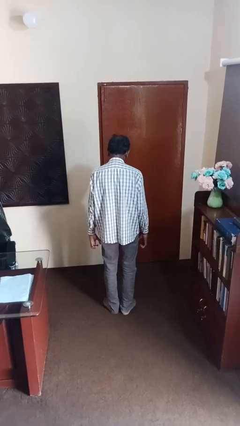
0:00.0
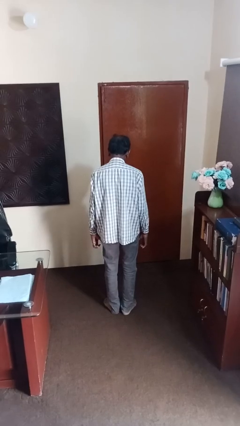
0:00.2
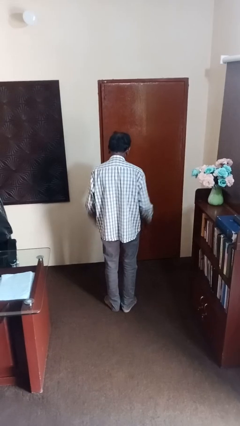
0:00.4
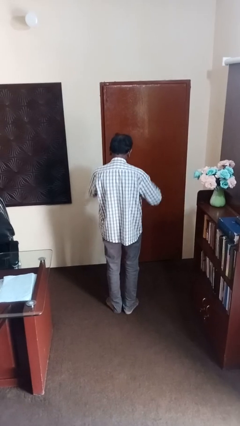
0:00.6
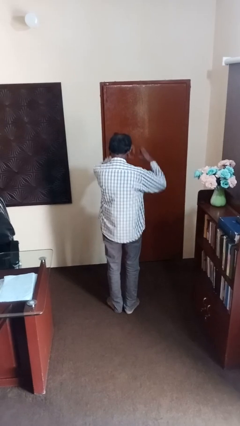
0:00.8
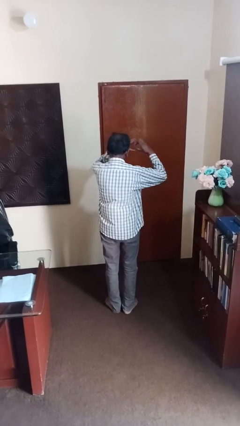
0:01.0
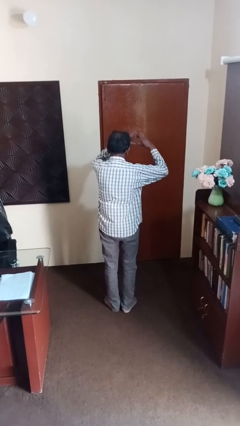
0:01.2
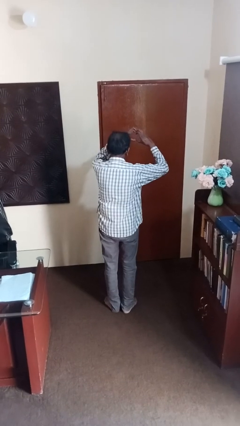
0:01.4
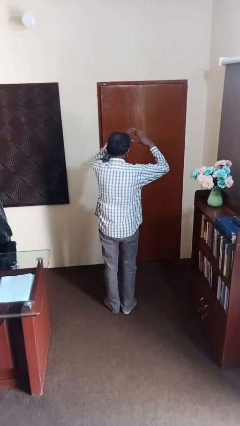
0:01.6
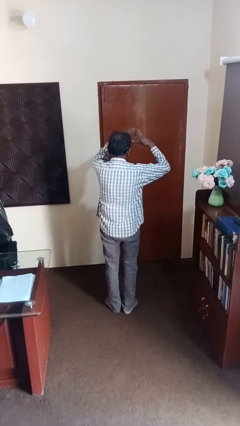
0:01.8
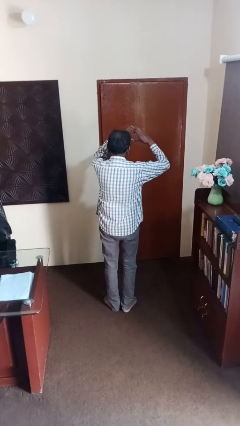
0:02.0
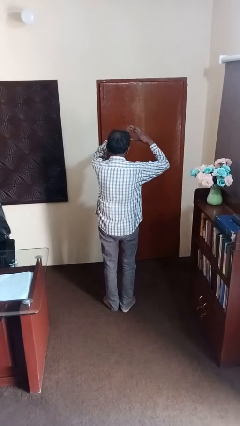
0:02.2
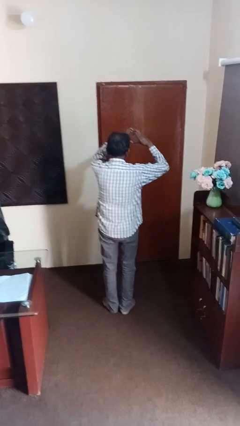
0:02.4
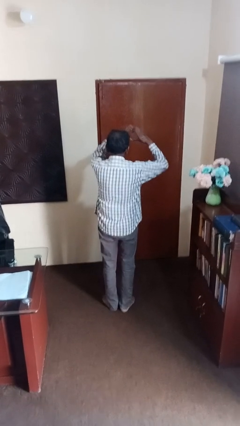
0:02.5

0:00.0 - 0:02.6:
person gestures heart

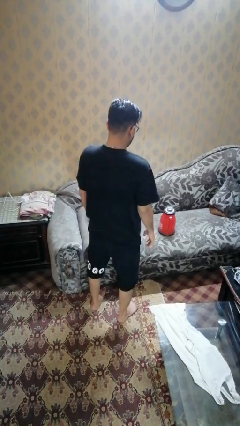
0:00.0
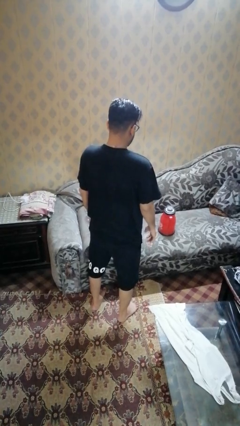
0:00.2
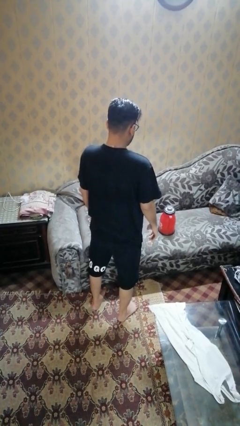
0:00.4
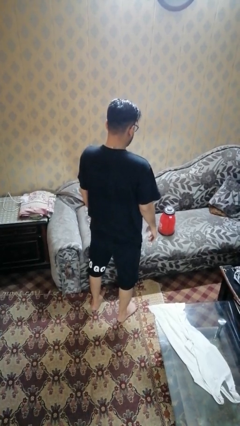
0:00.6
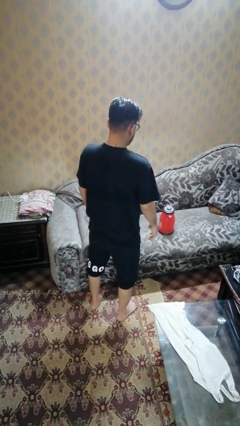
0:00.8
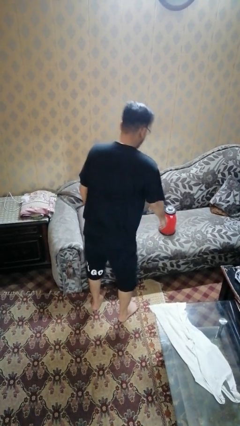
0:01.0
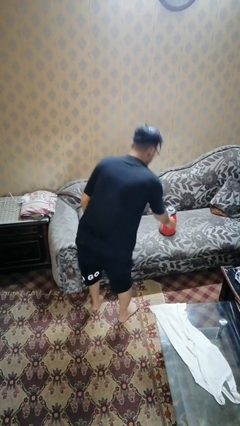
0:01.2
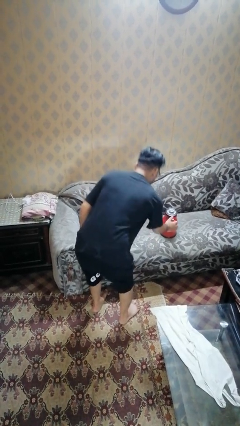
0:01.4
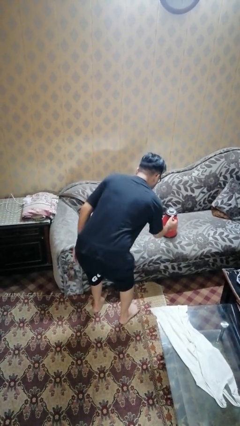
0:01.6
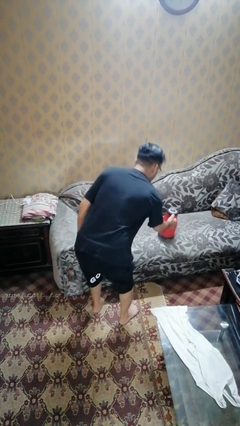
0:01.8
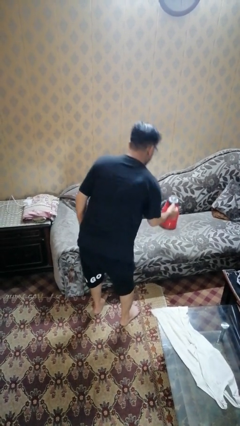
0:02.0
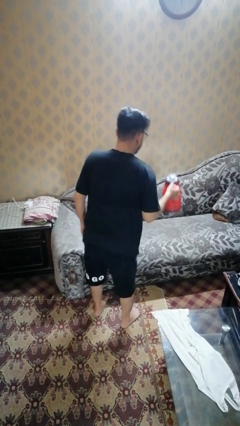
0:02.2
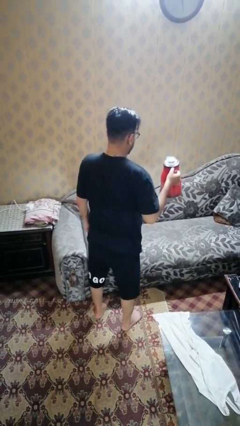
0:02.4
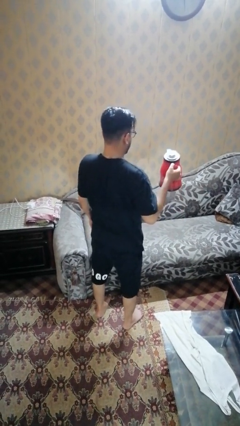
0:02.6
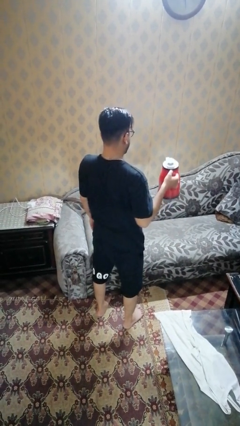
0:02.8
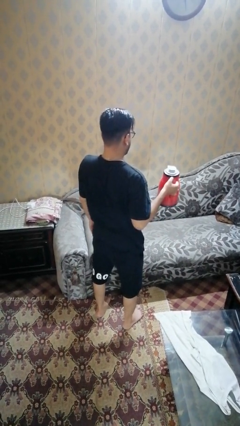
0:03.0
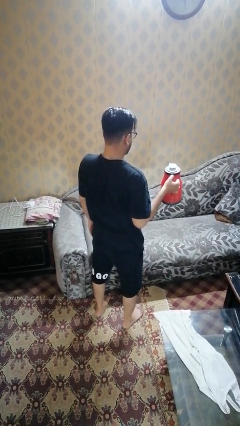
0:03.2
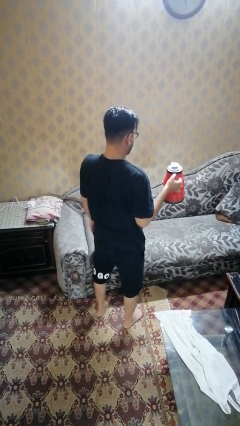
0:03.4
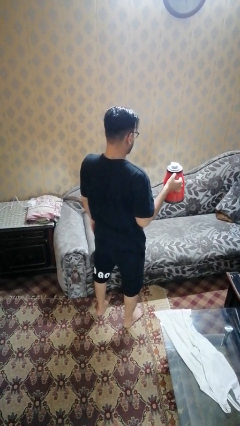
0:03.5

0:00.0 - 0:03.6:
person picks up object from couch

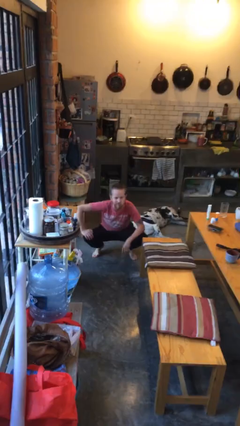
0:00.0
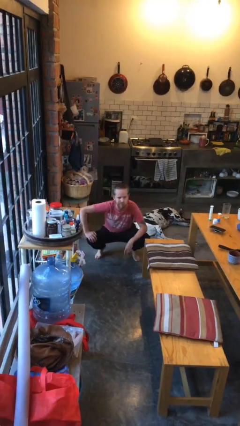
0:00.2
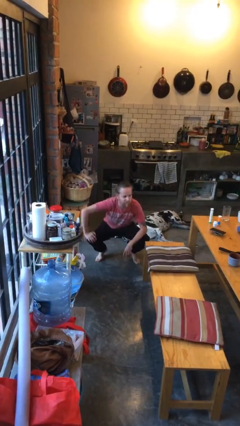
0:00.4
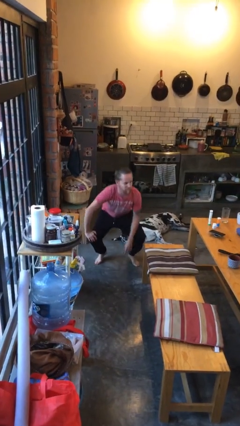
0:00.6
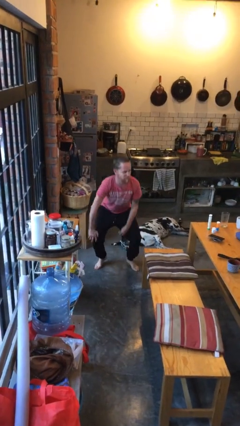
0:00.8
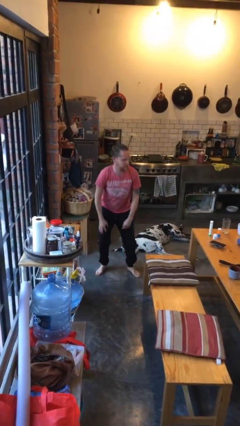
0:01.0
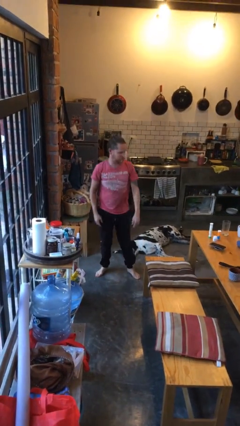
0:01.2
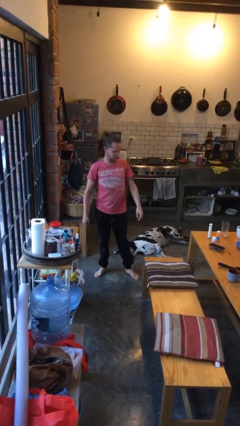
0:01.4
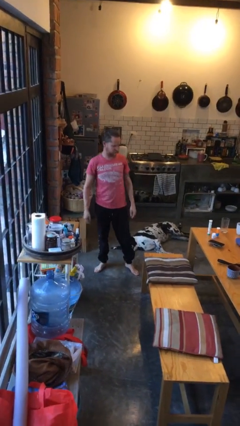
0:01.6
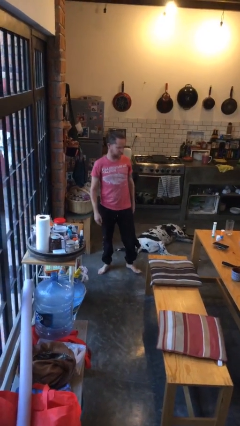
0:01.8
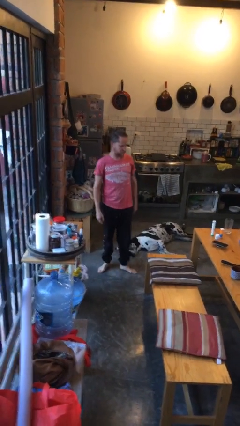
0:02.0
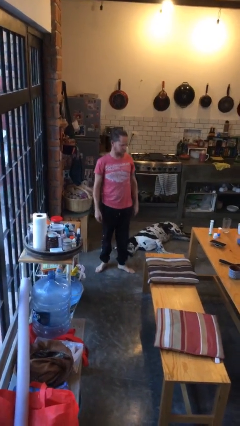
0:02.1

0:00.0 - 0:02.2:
person stands up

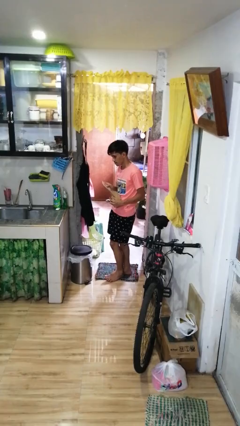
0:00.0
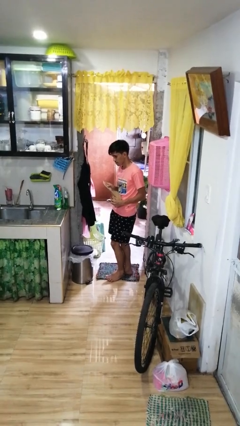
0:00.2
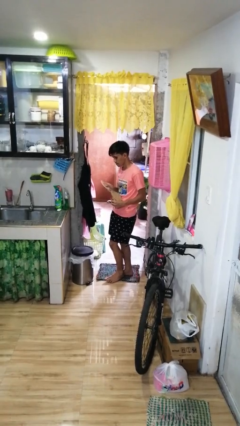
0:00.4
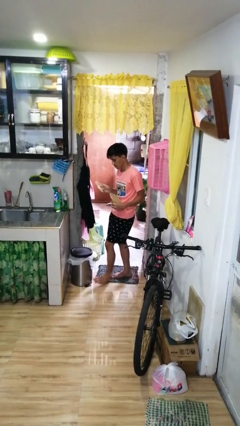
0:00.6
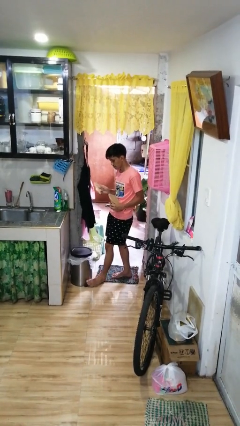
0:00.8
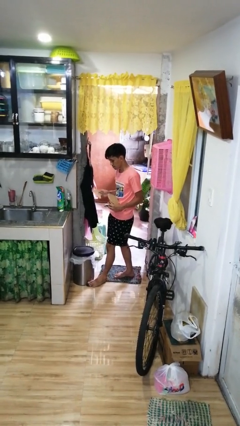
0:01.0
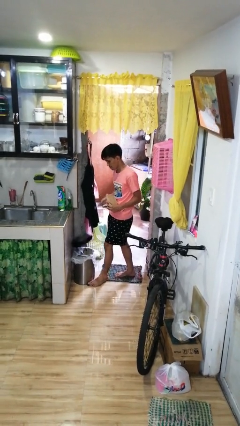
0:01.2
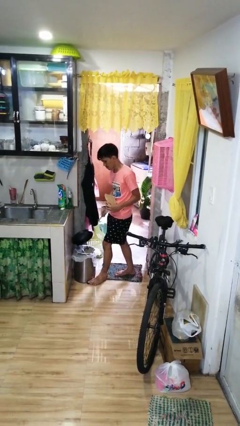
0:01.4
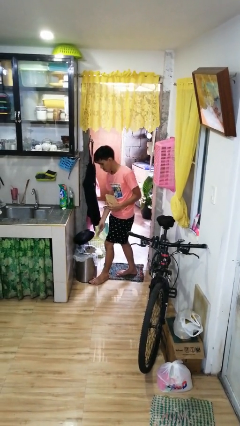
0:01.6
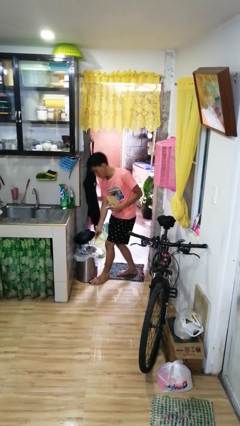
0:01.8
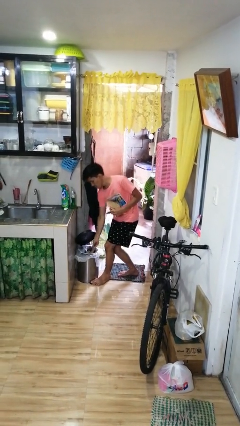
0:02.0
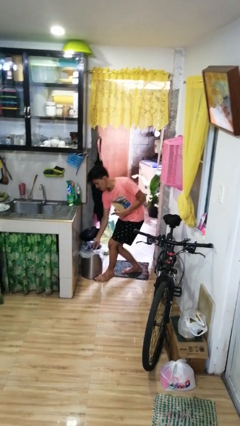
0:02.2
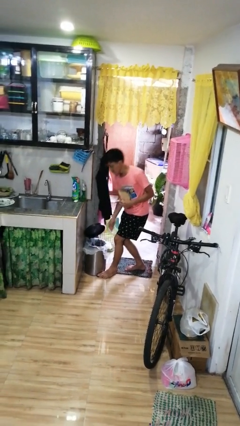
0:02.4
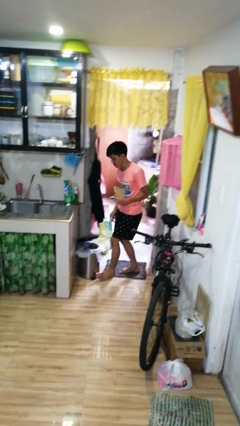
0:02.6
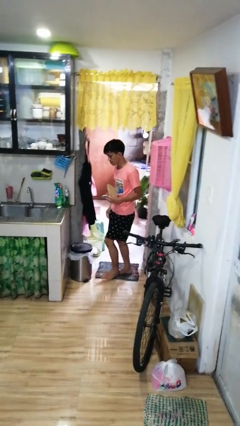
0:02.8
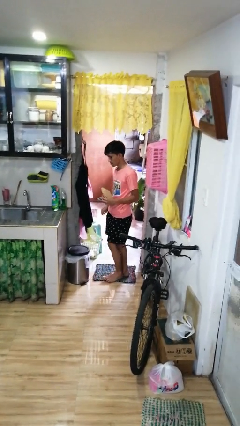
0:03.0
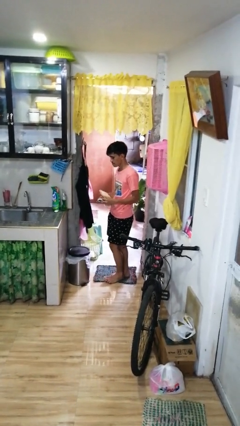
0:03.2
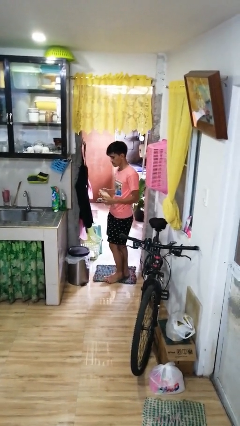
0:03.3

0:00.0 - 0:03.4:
person discards trash

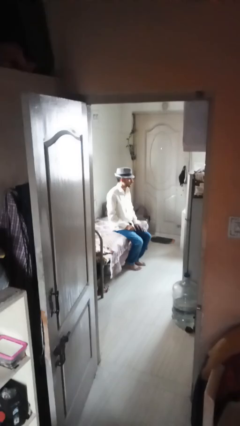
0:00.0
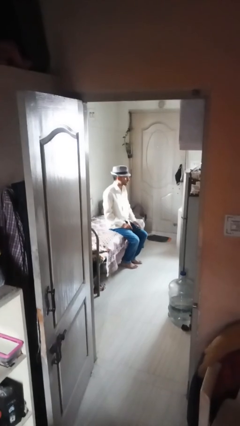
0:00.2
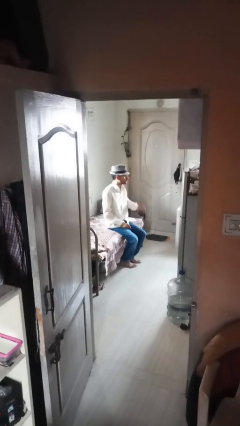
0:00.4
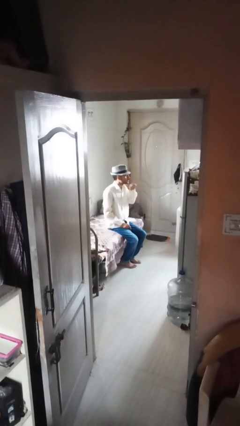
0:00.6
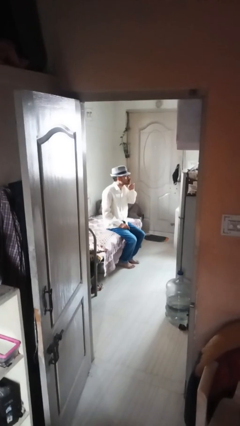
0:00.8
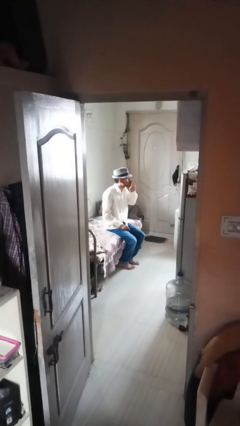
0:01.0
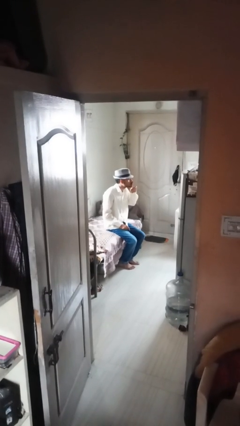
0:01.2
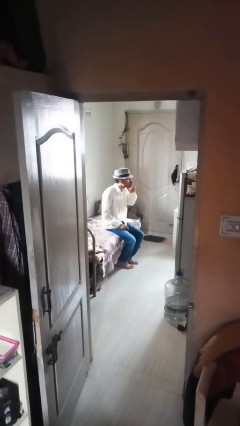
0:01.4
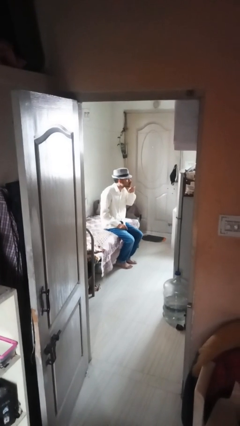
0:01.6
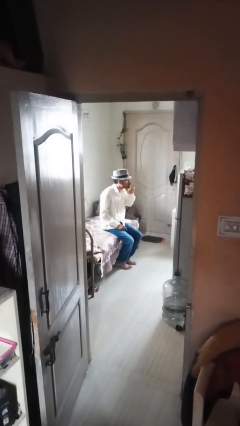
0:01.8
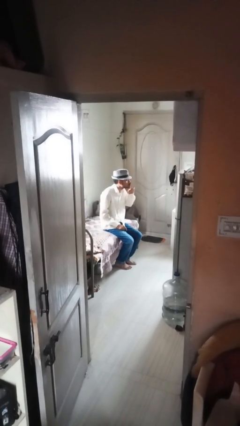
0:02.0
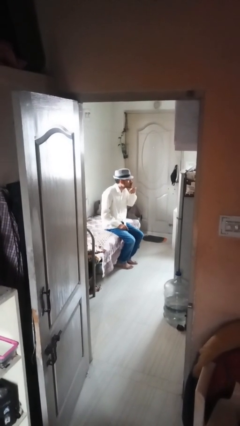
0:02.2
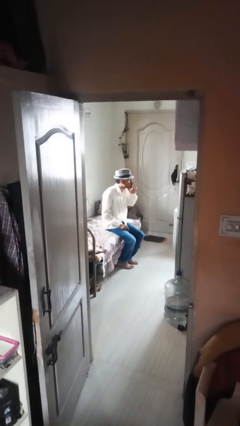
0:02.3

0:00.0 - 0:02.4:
person gestures be quiet

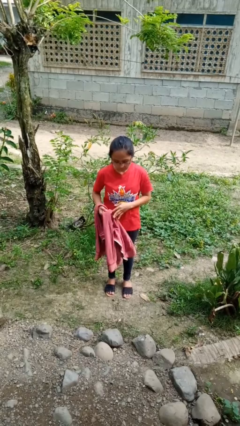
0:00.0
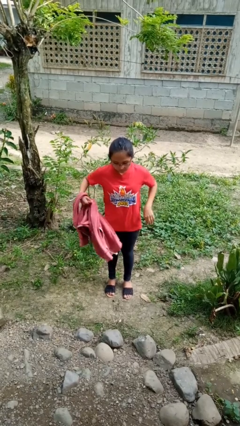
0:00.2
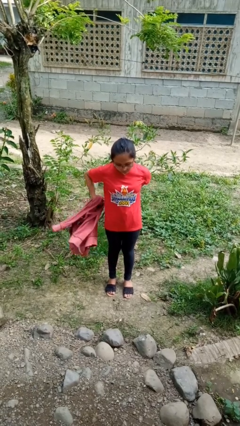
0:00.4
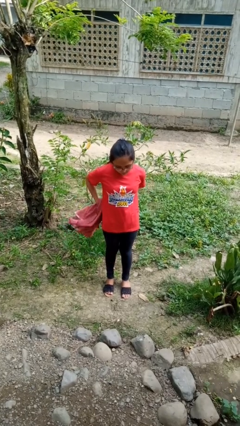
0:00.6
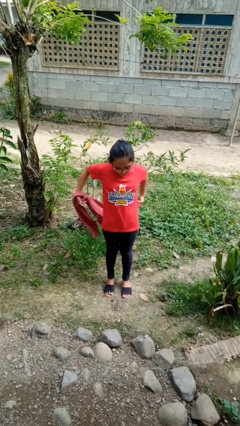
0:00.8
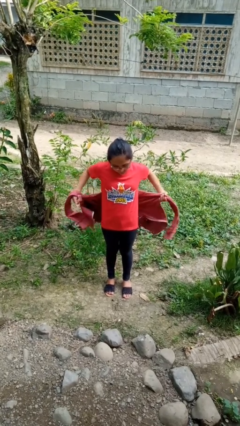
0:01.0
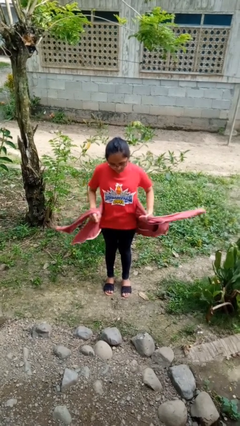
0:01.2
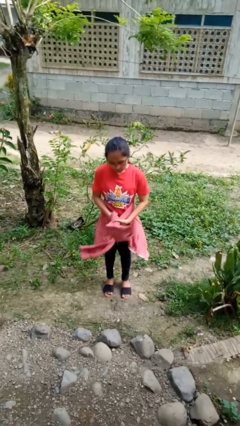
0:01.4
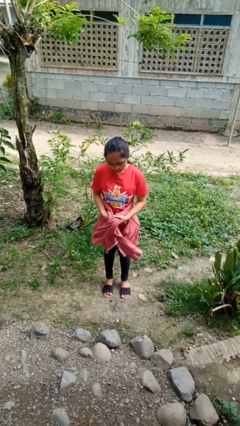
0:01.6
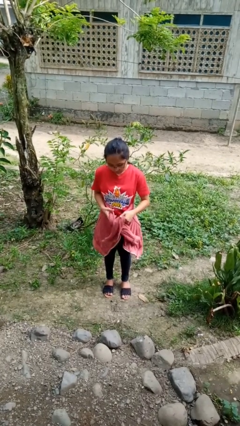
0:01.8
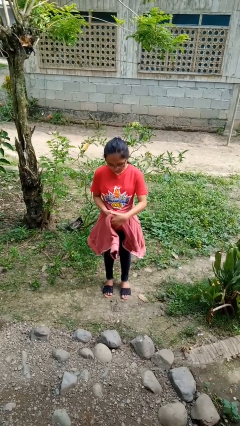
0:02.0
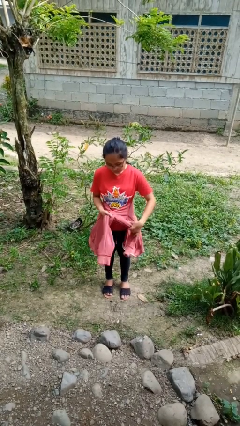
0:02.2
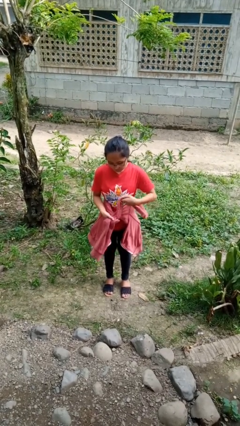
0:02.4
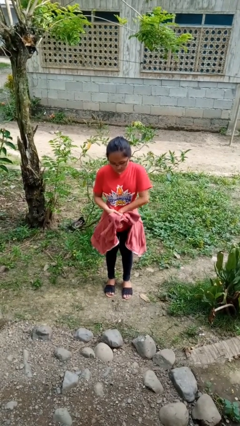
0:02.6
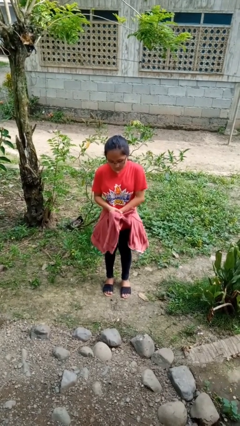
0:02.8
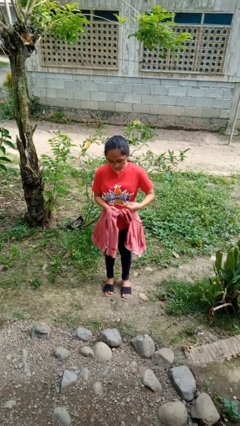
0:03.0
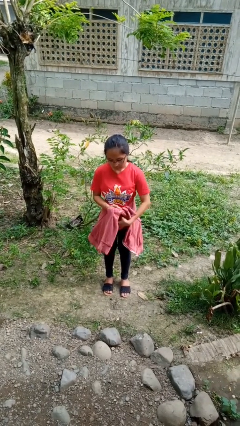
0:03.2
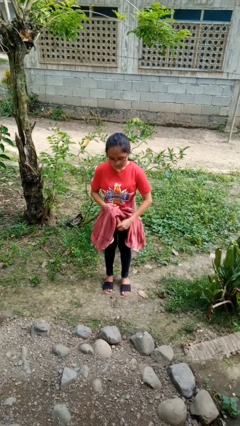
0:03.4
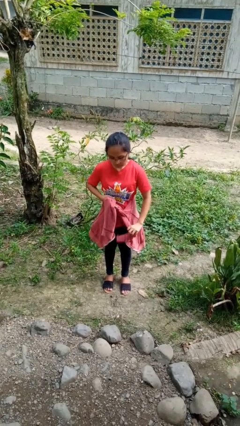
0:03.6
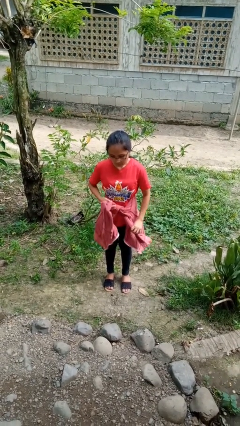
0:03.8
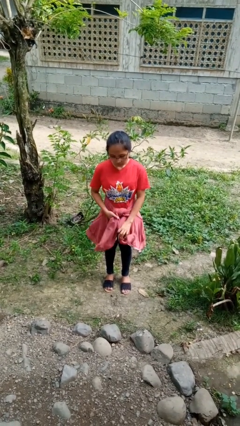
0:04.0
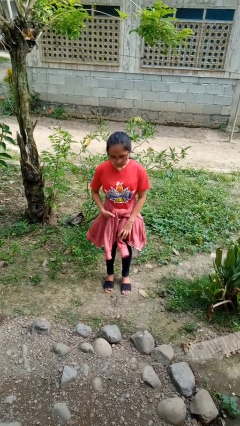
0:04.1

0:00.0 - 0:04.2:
person ties jacket around waist
